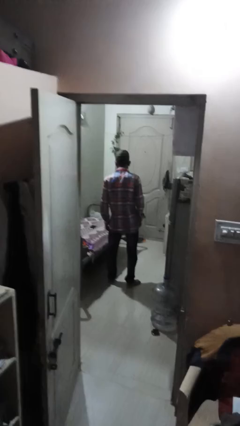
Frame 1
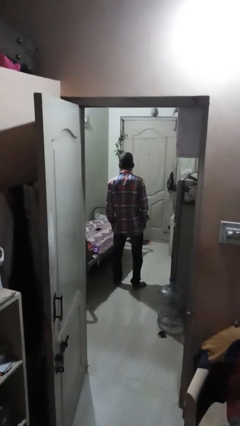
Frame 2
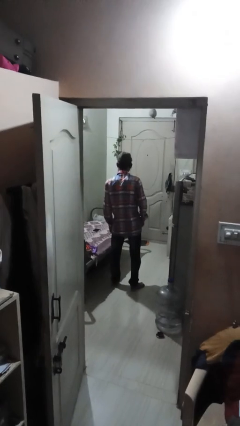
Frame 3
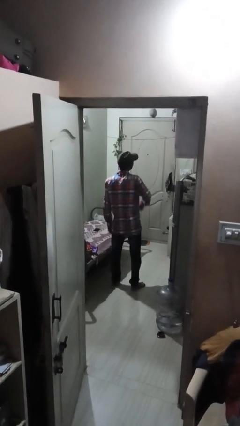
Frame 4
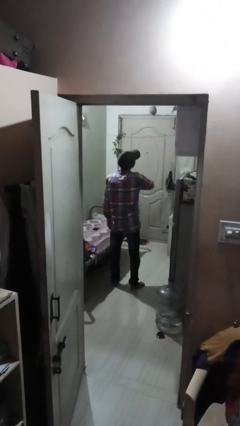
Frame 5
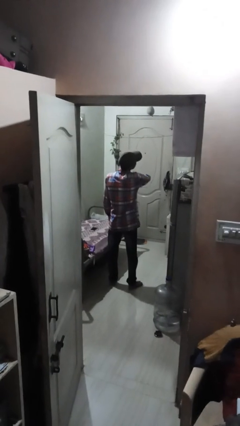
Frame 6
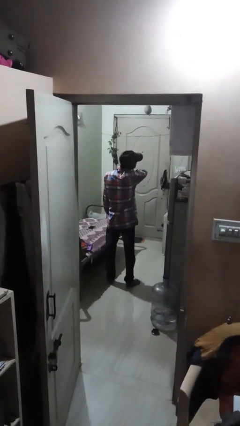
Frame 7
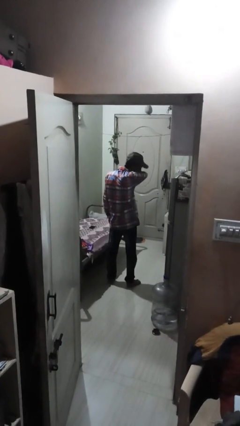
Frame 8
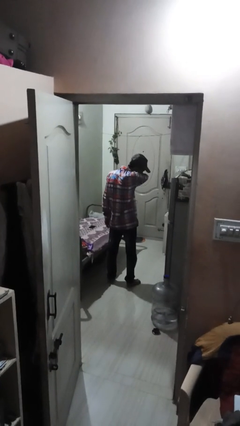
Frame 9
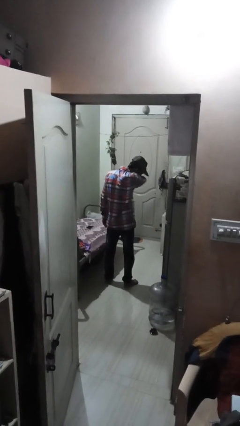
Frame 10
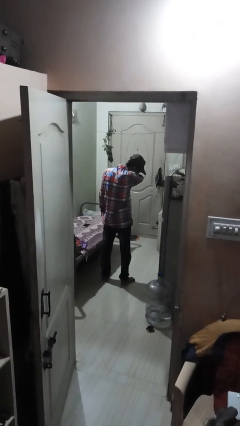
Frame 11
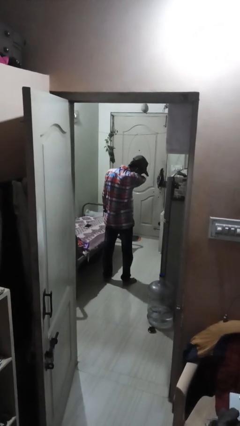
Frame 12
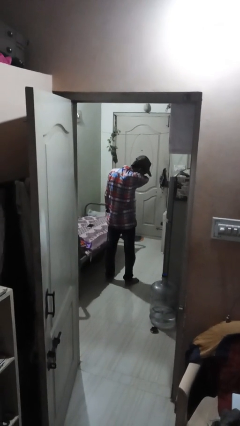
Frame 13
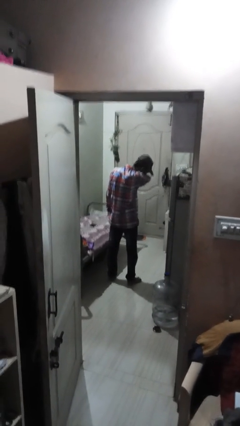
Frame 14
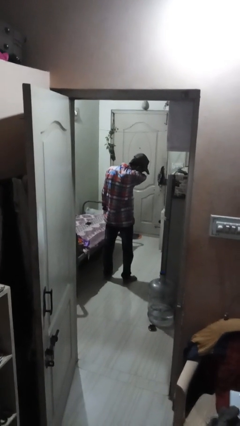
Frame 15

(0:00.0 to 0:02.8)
person sneezes into arm

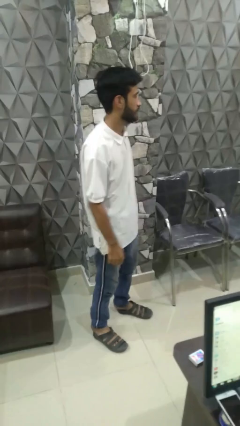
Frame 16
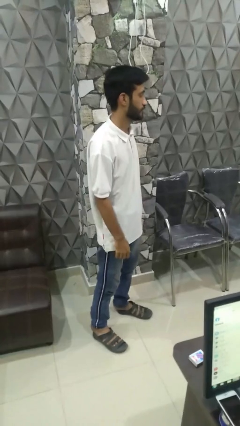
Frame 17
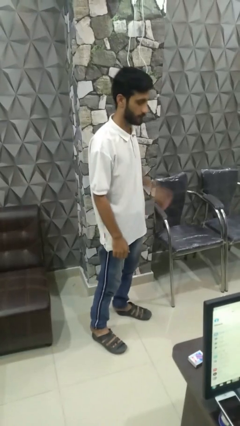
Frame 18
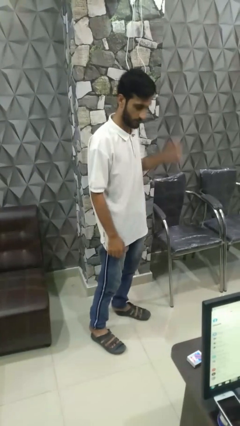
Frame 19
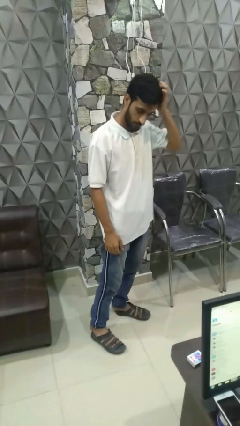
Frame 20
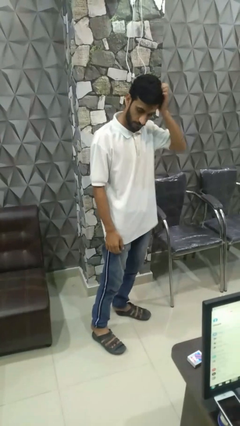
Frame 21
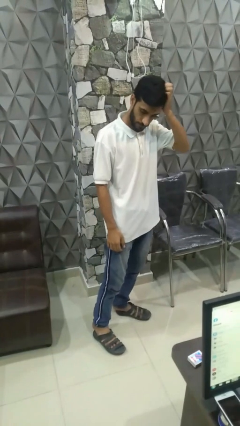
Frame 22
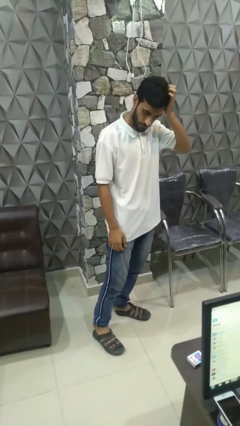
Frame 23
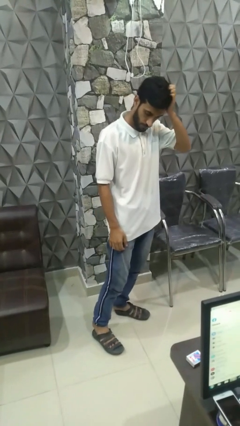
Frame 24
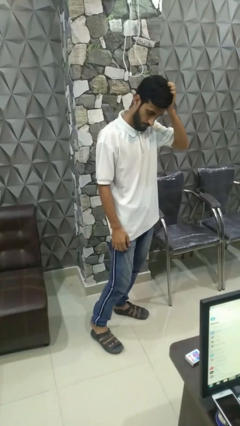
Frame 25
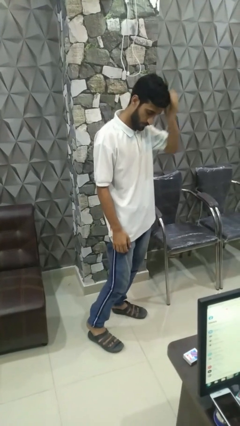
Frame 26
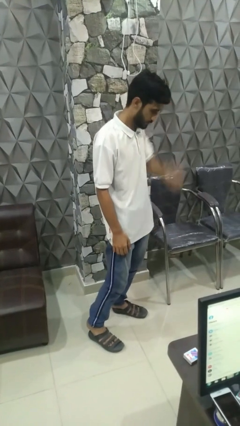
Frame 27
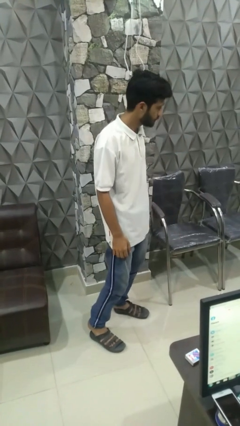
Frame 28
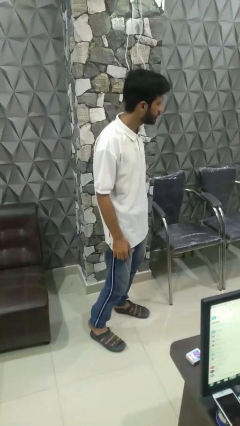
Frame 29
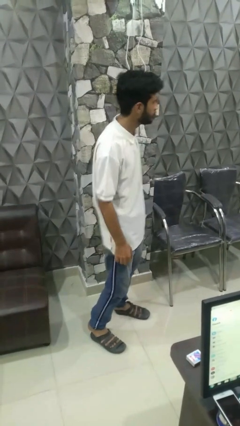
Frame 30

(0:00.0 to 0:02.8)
person scratches face

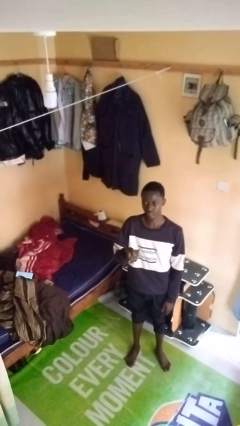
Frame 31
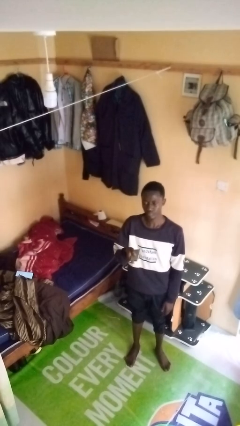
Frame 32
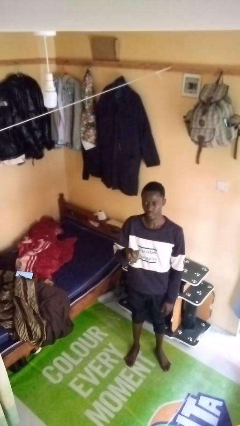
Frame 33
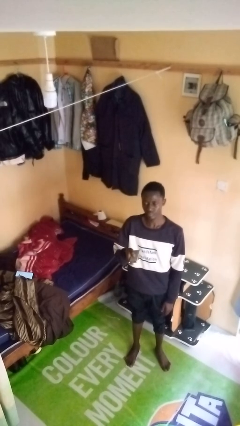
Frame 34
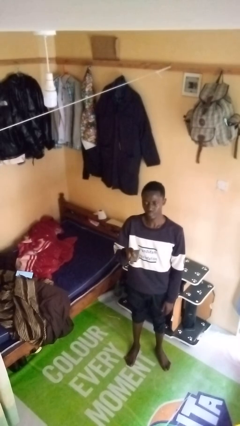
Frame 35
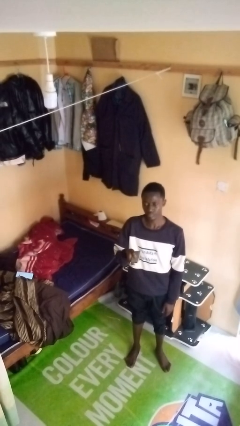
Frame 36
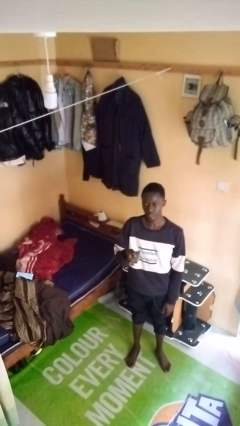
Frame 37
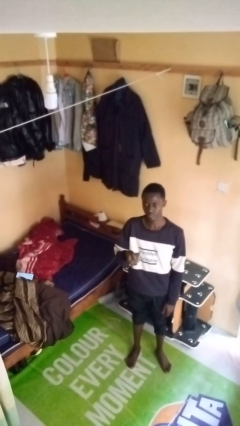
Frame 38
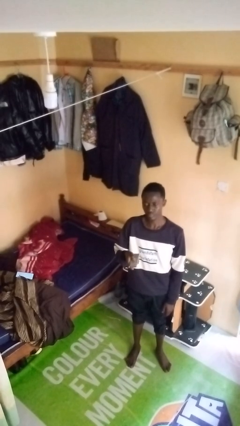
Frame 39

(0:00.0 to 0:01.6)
person uses television remote

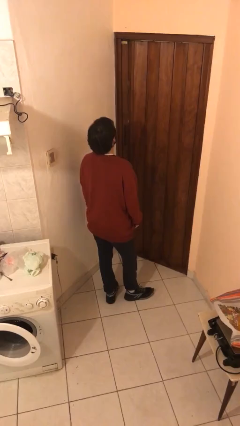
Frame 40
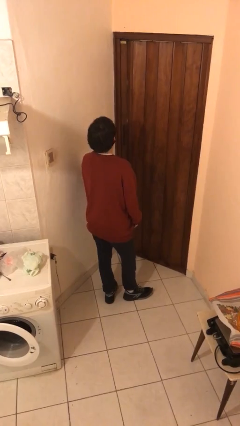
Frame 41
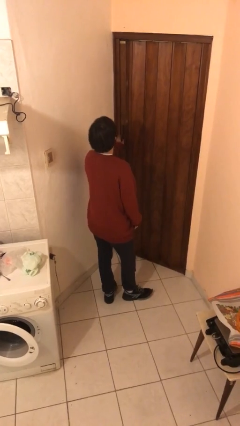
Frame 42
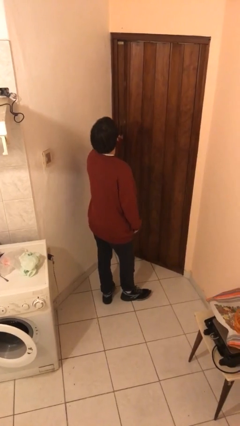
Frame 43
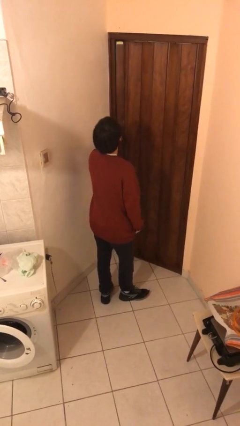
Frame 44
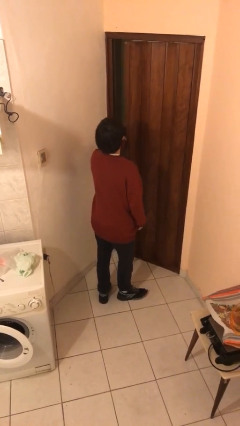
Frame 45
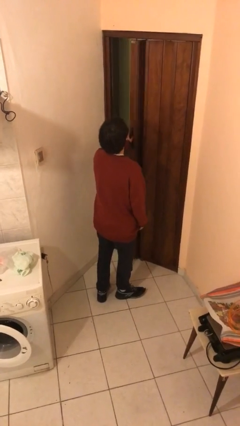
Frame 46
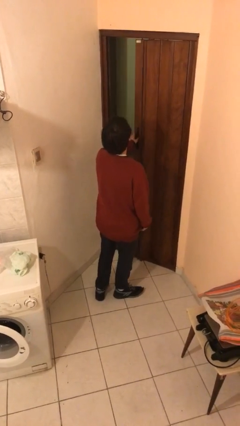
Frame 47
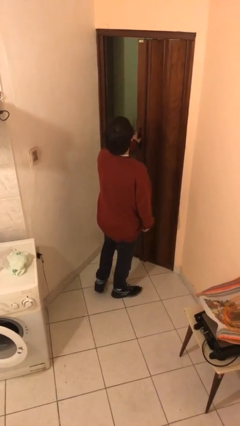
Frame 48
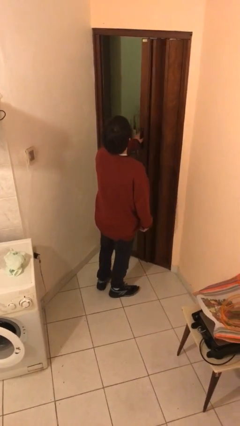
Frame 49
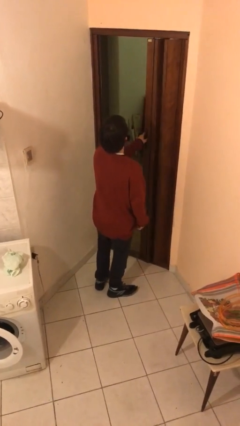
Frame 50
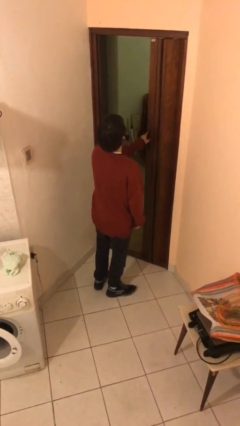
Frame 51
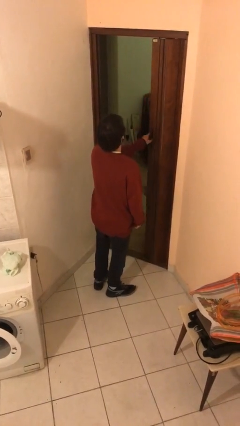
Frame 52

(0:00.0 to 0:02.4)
person opens sliding door

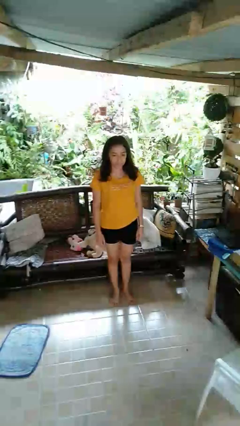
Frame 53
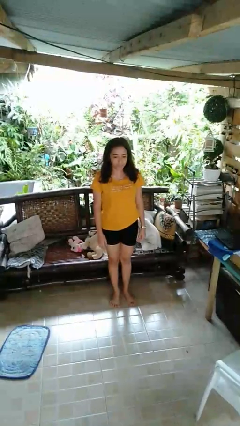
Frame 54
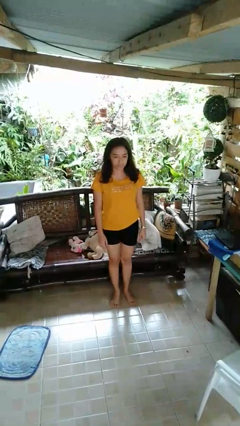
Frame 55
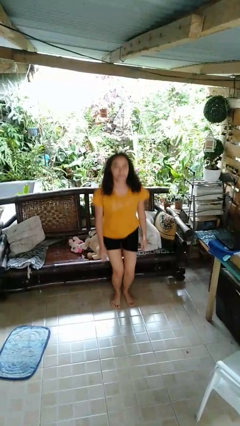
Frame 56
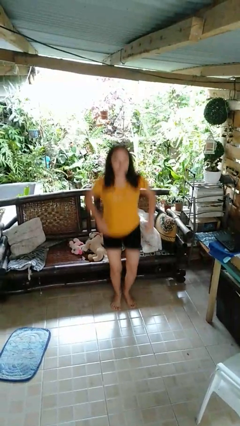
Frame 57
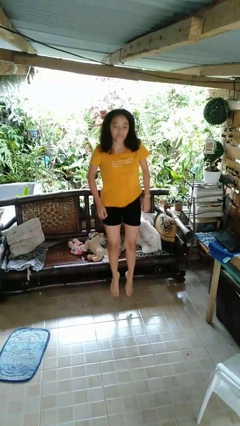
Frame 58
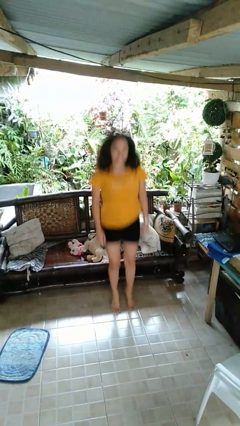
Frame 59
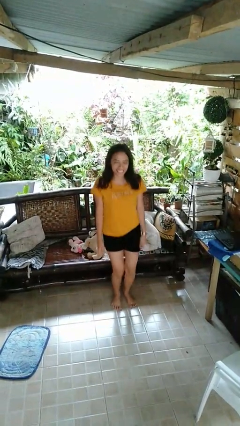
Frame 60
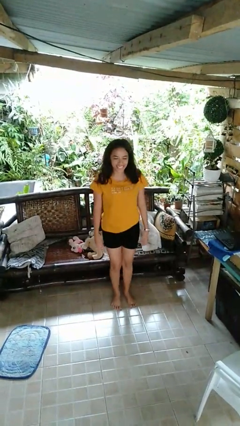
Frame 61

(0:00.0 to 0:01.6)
person jumps

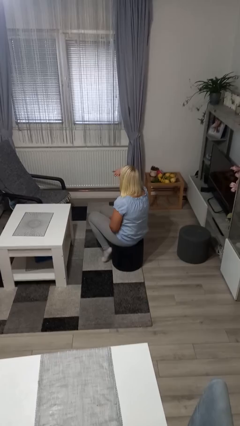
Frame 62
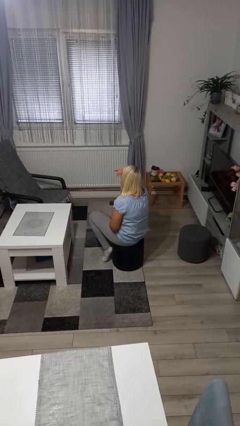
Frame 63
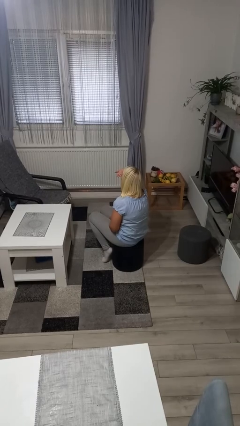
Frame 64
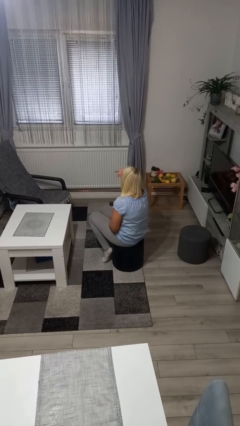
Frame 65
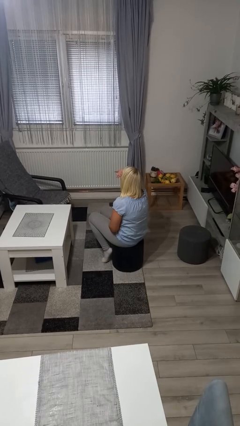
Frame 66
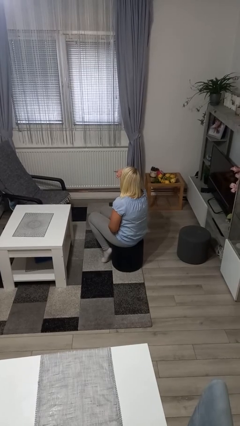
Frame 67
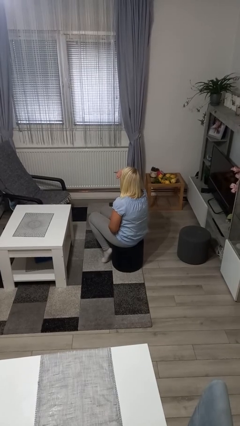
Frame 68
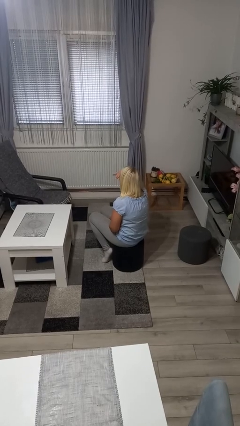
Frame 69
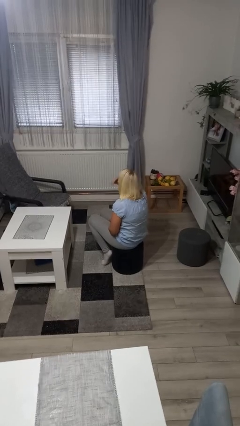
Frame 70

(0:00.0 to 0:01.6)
person shades eyes

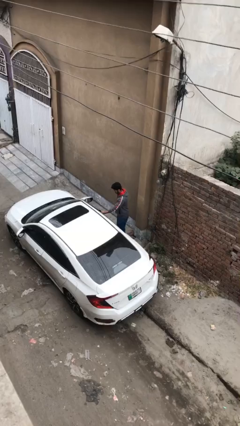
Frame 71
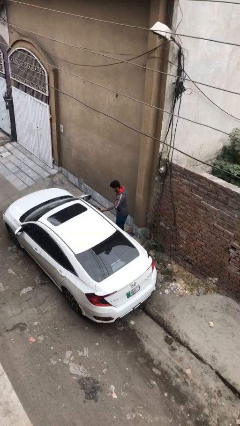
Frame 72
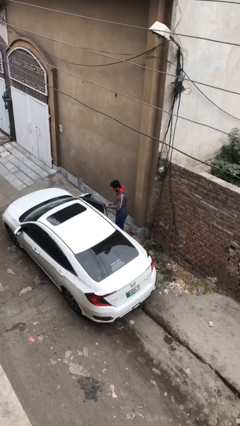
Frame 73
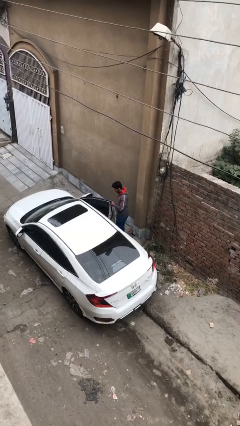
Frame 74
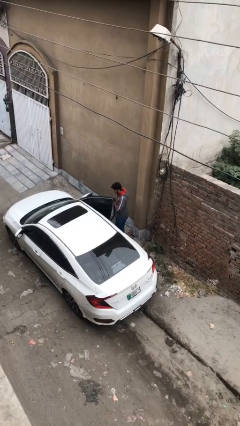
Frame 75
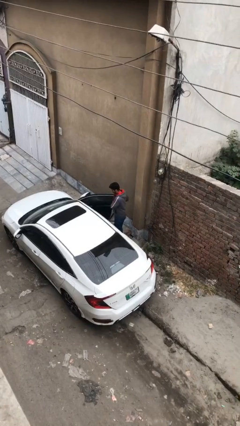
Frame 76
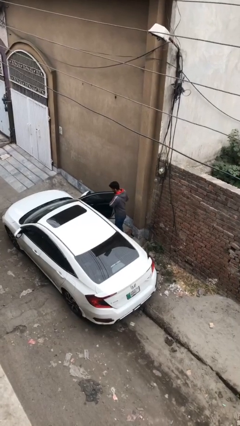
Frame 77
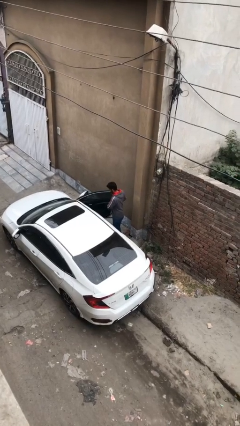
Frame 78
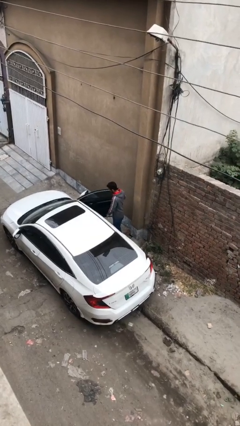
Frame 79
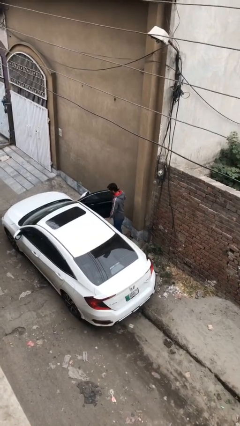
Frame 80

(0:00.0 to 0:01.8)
person opens car door

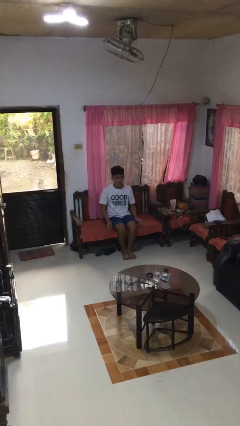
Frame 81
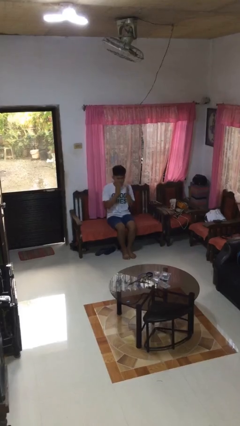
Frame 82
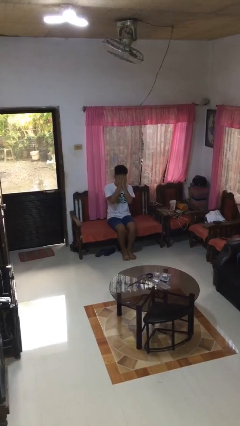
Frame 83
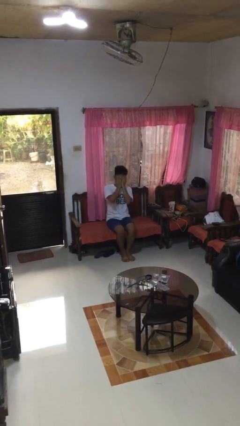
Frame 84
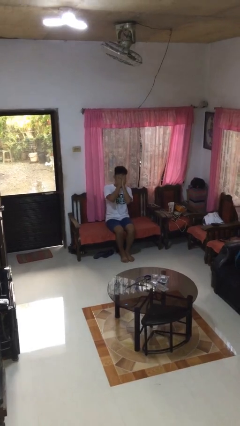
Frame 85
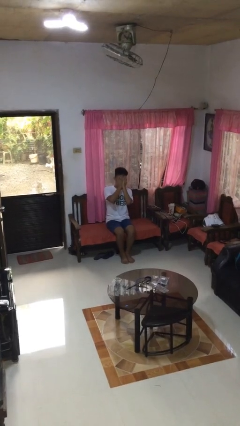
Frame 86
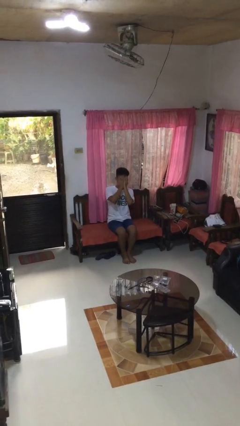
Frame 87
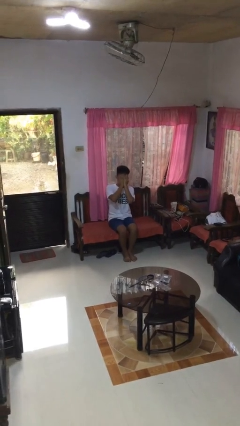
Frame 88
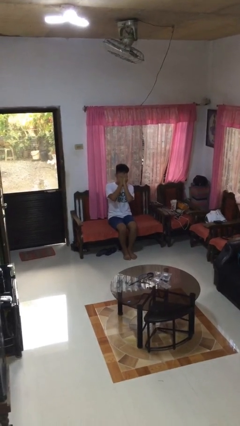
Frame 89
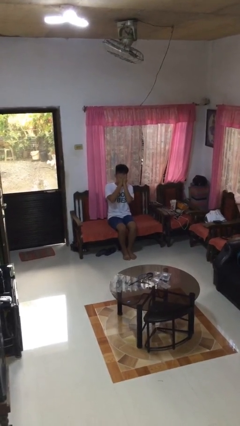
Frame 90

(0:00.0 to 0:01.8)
person covers face with hands

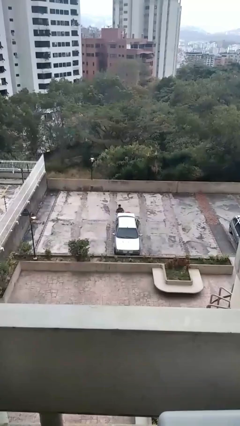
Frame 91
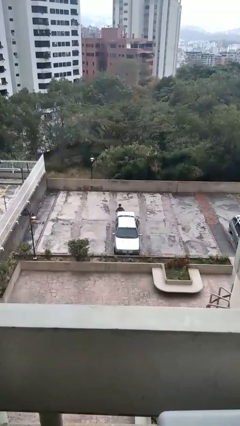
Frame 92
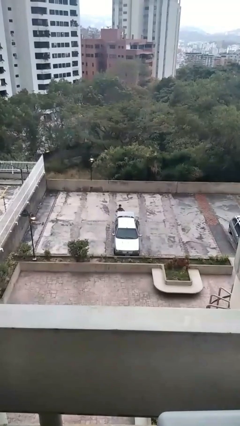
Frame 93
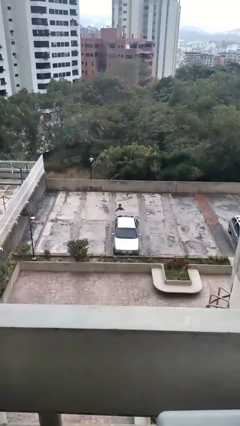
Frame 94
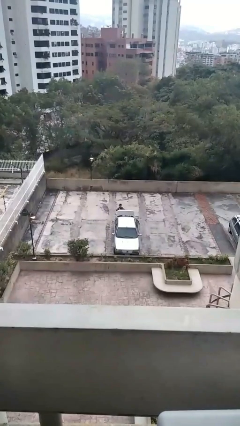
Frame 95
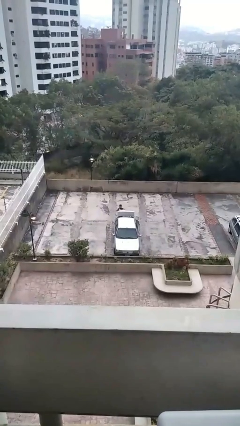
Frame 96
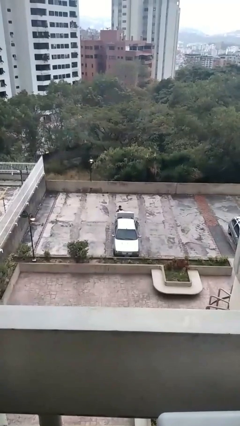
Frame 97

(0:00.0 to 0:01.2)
person opens car trunk
